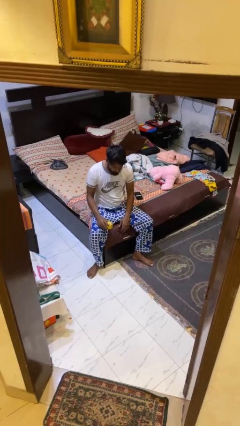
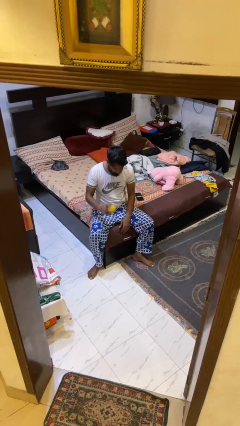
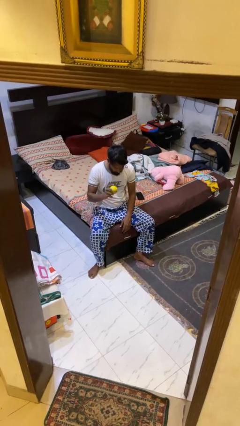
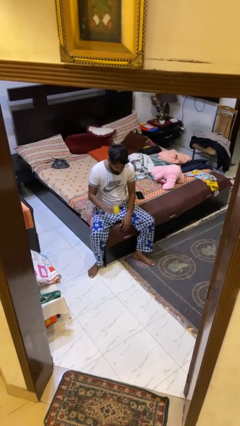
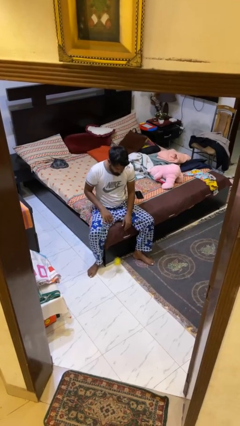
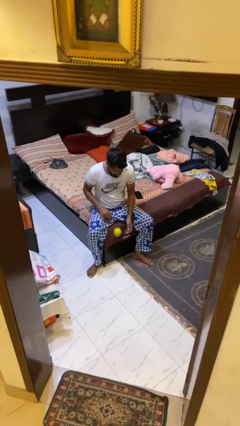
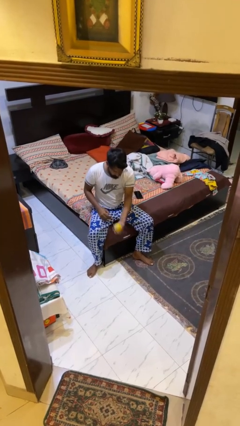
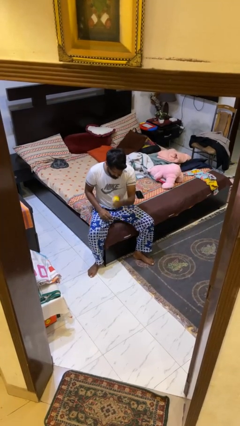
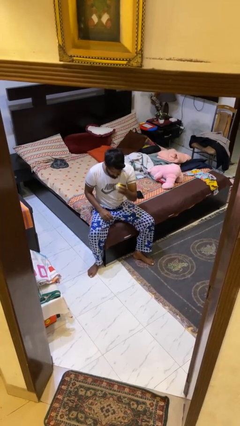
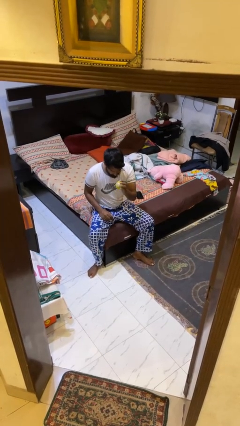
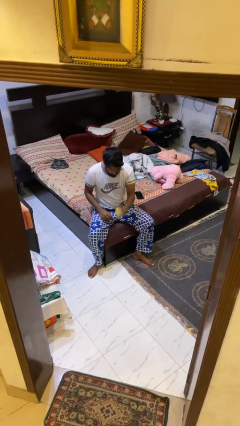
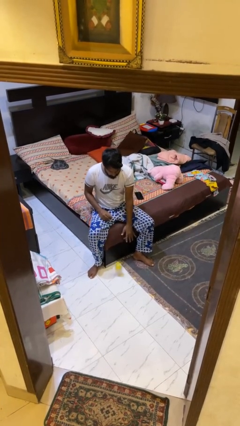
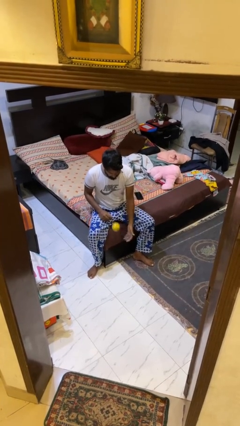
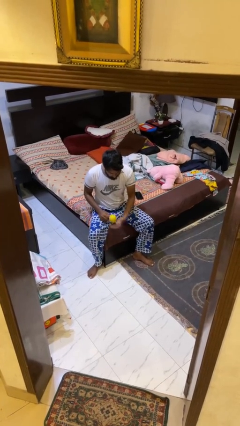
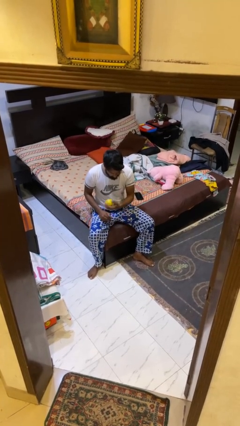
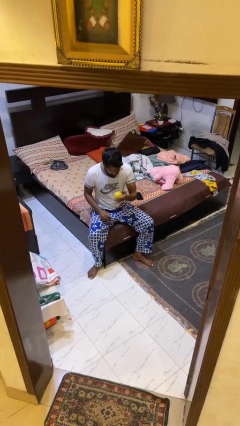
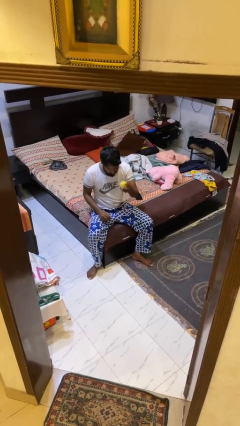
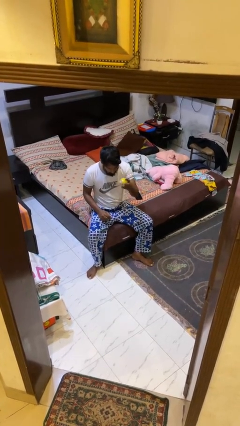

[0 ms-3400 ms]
person bounces ball on floor

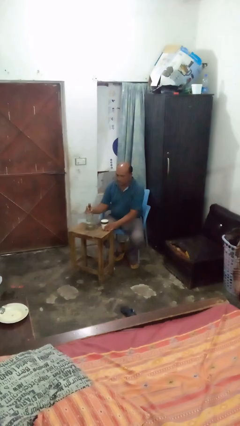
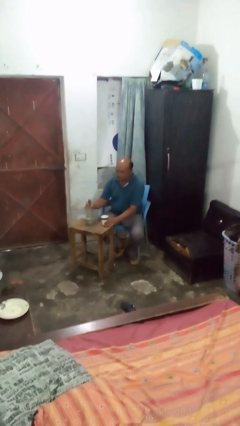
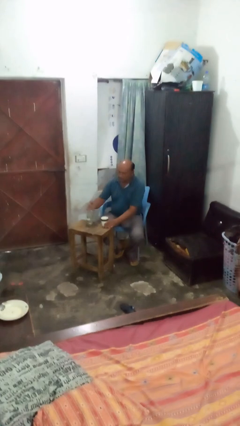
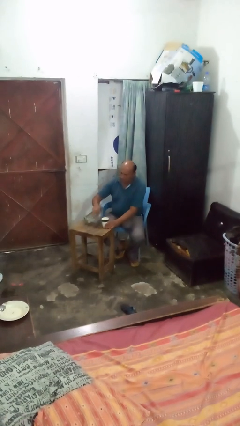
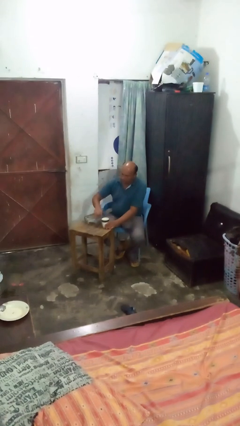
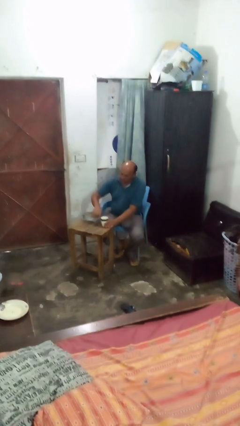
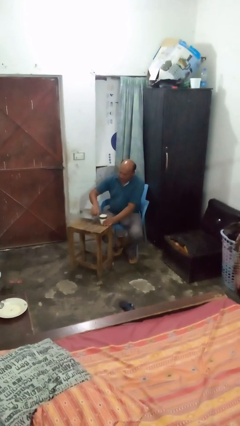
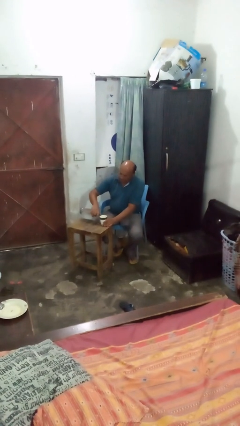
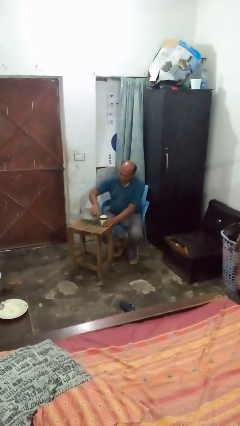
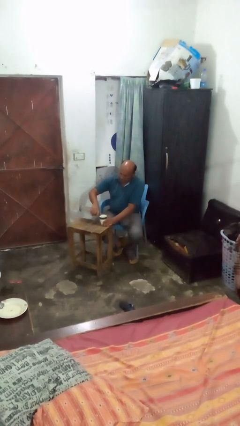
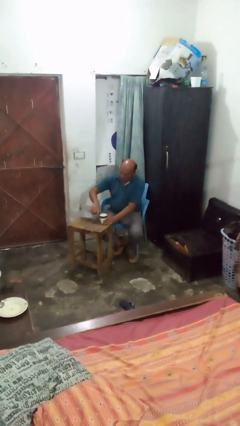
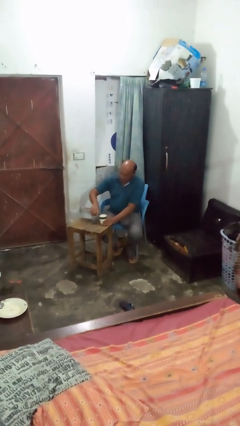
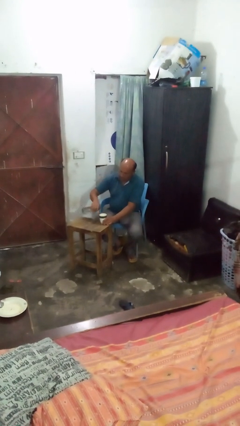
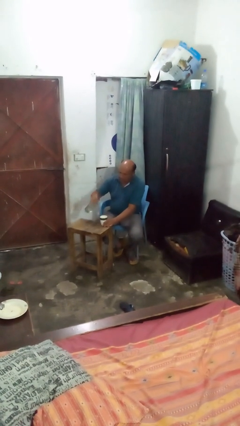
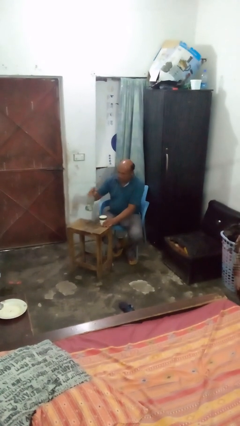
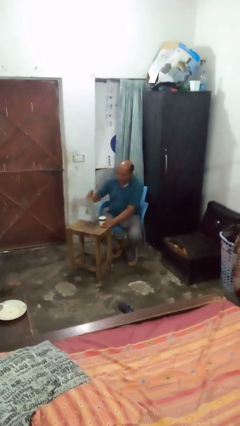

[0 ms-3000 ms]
person pours liquid into cup

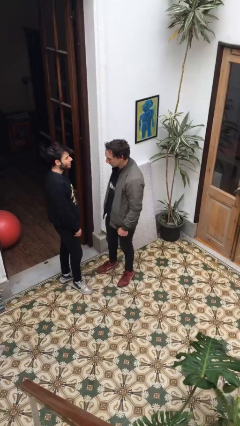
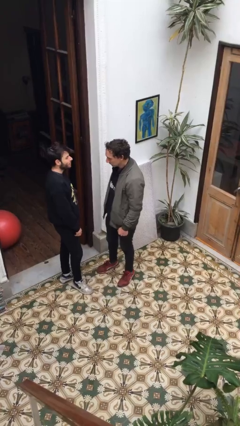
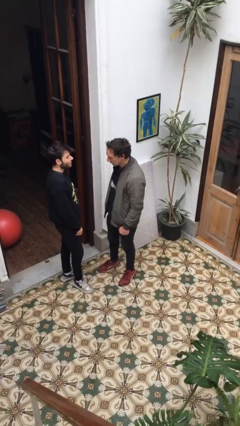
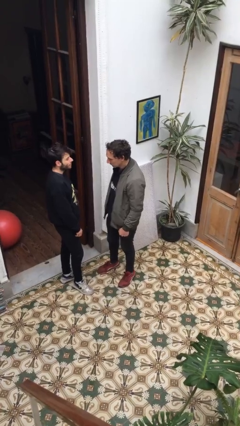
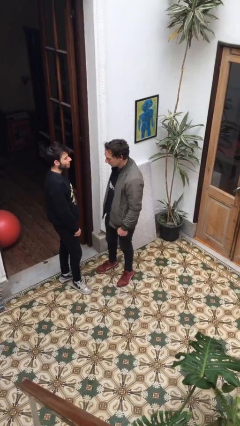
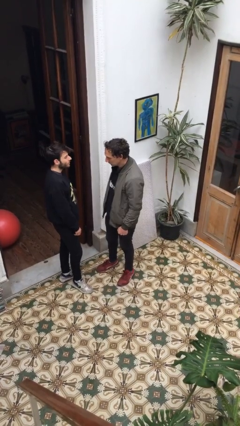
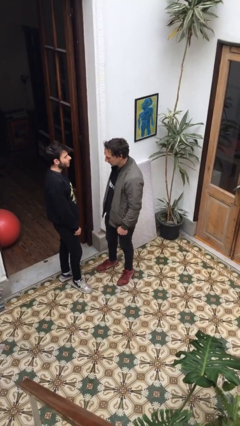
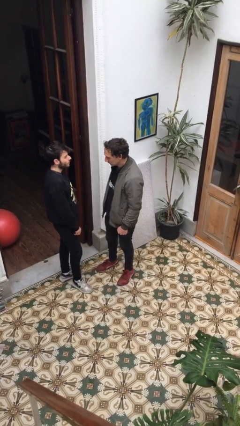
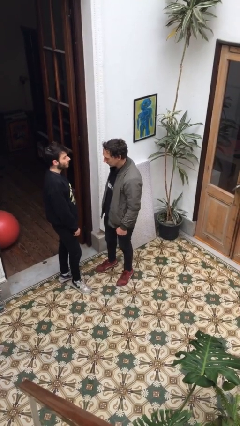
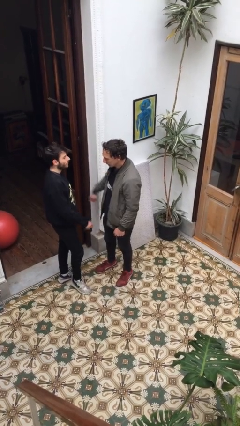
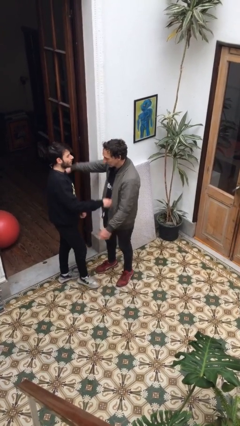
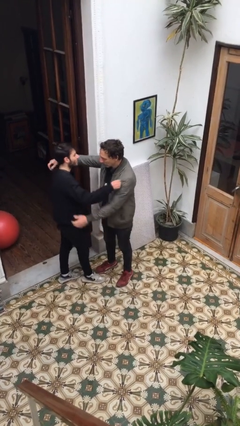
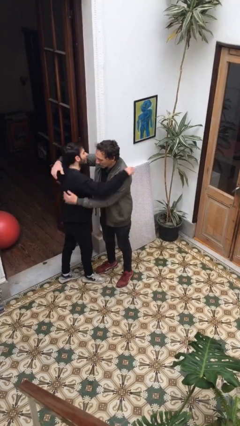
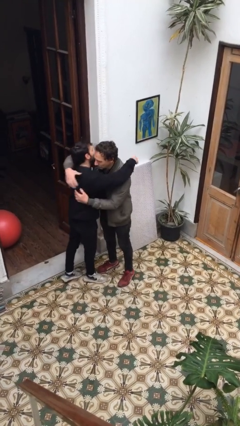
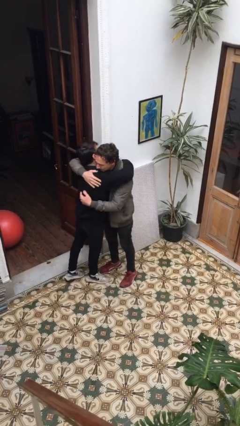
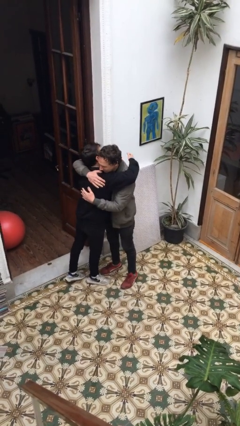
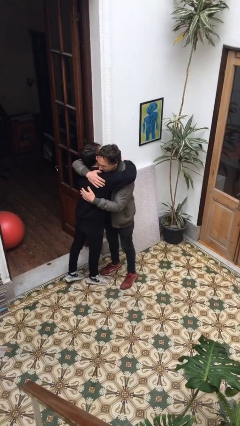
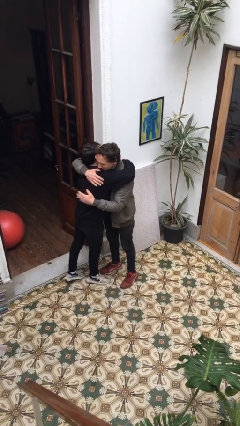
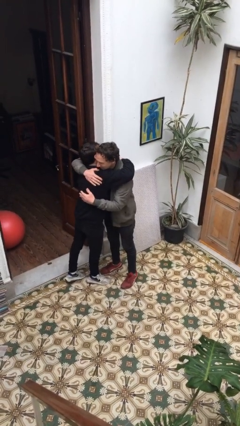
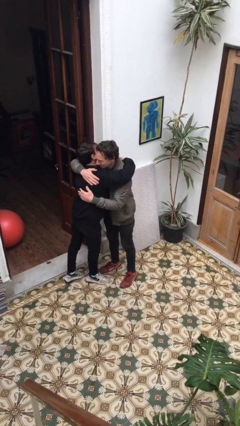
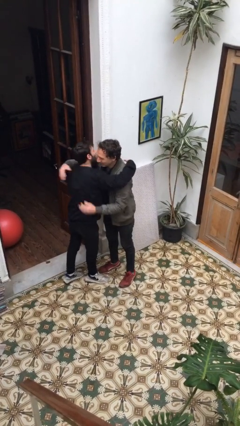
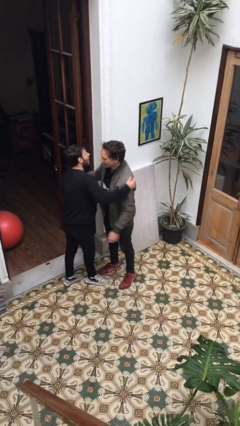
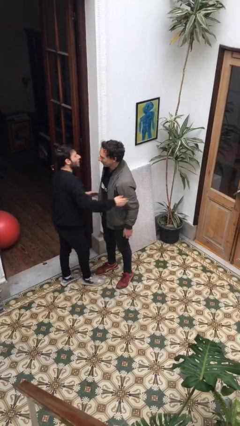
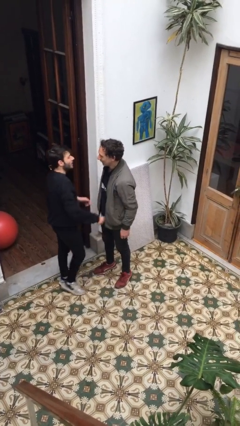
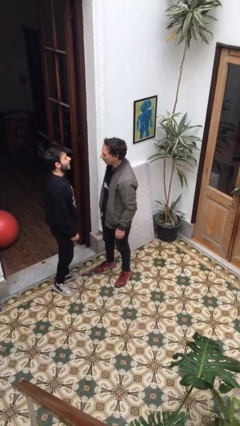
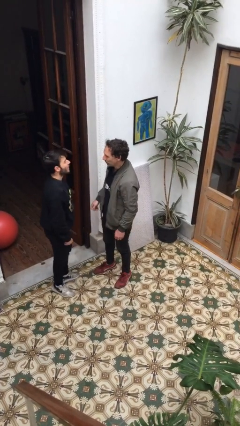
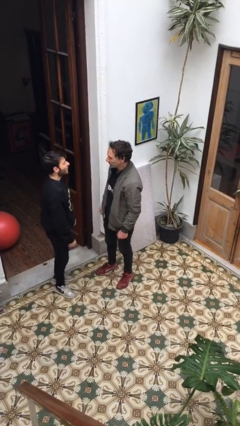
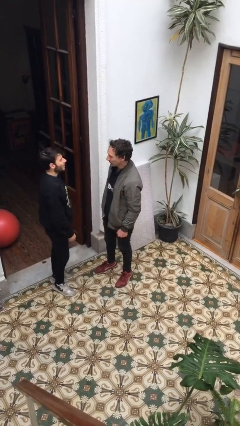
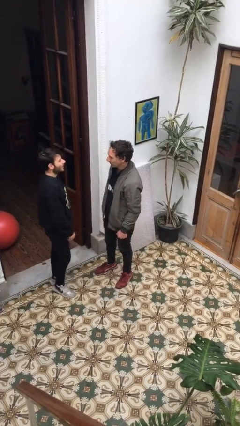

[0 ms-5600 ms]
person embraces person

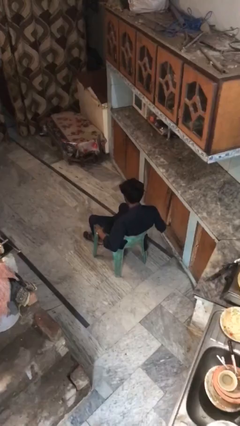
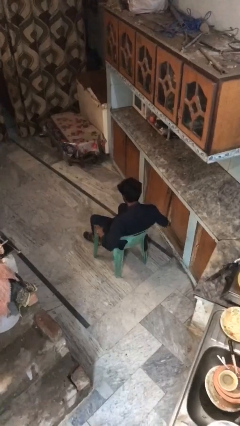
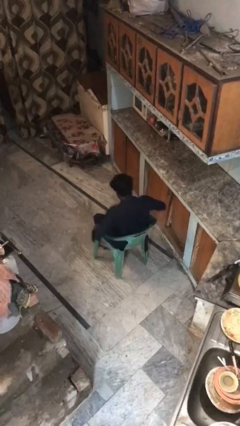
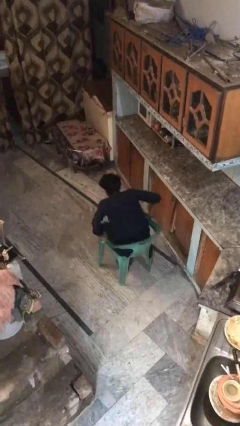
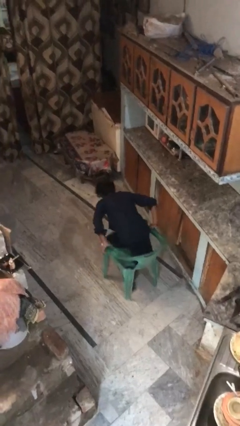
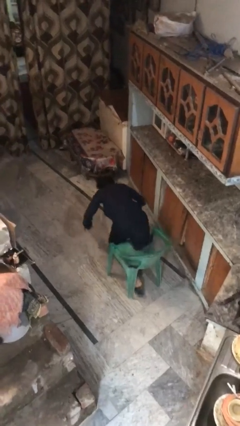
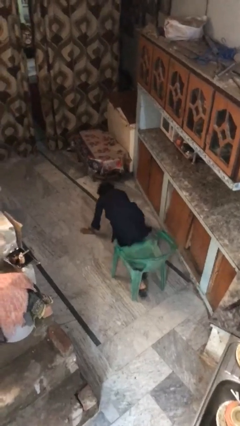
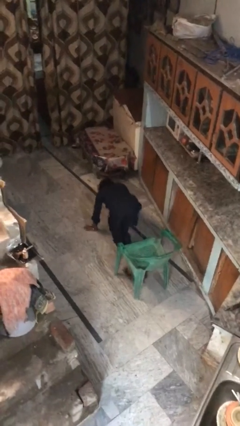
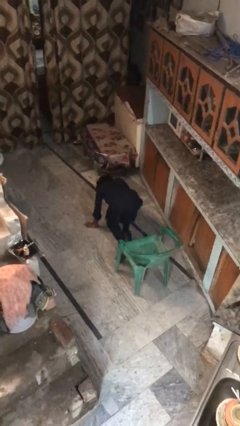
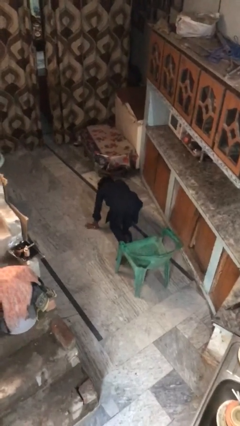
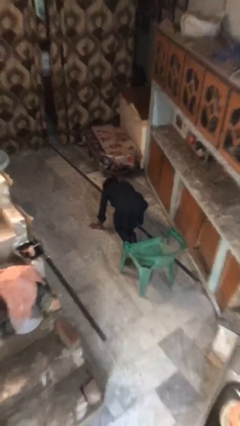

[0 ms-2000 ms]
person falls from chair

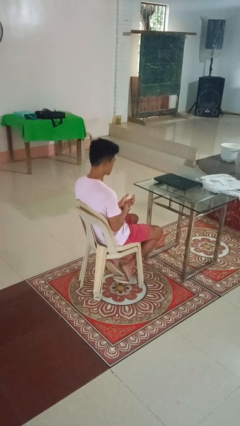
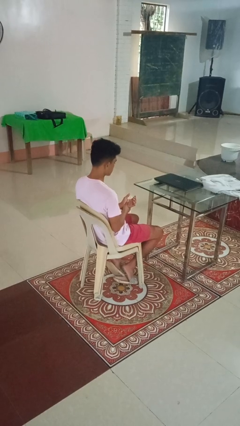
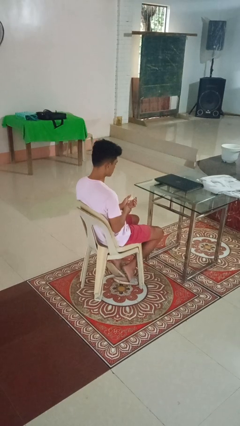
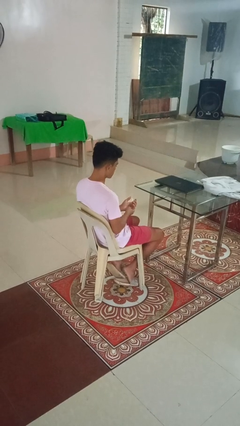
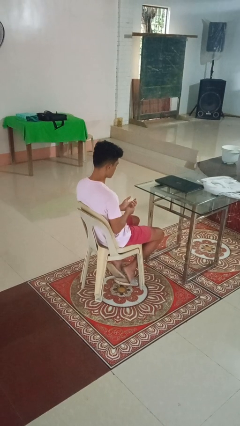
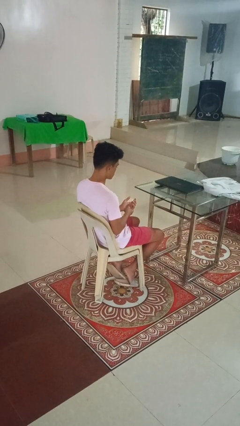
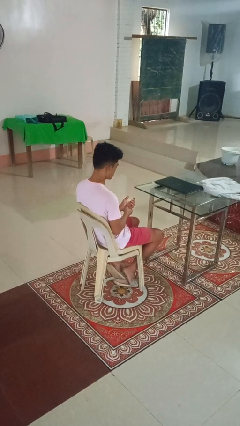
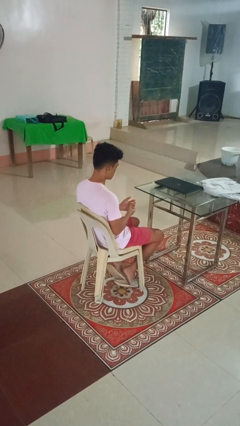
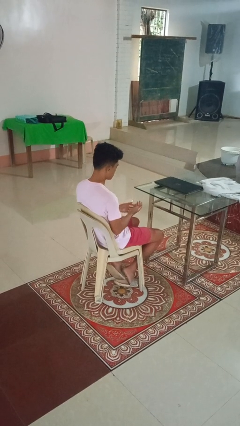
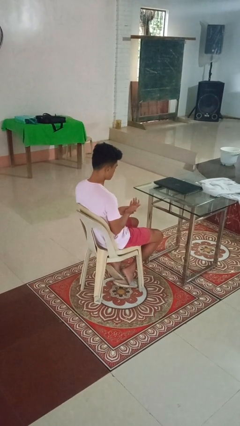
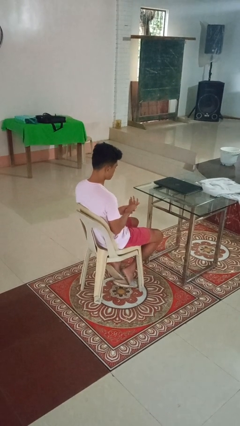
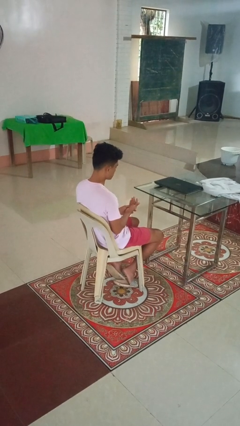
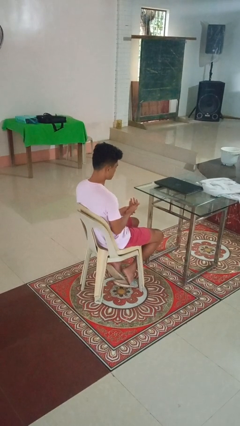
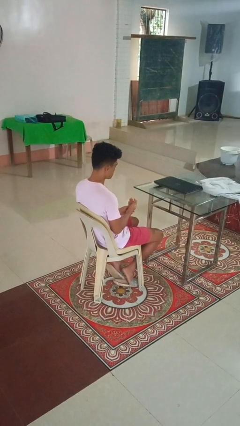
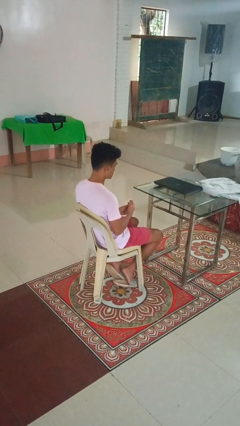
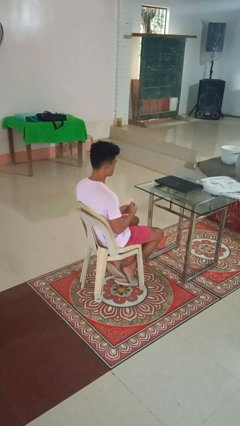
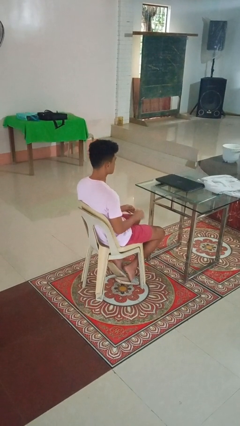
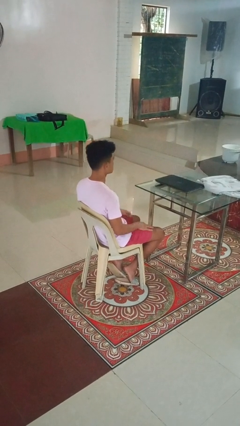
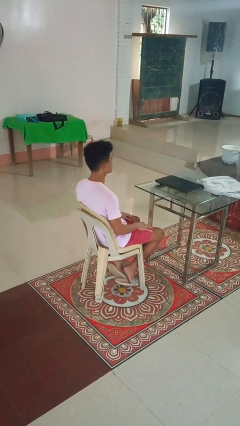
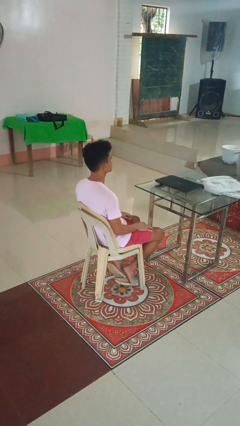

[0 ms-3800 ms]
person looks at hands in lap
